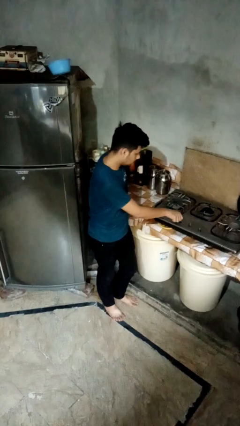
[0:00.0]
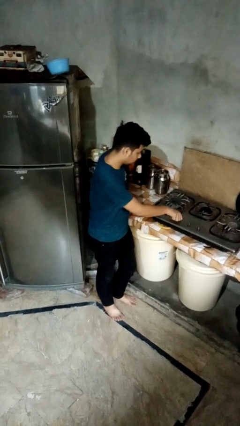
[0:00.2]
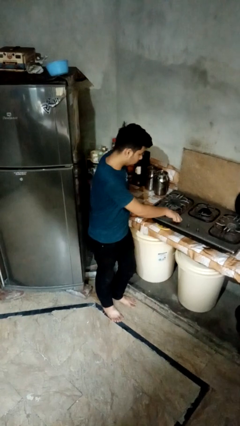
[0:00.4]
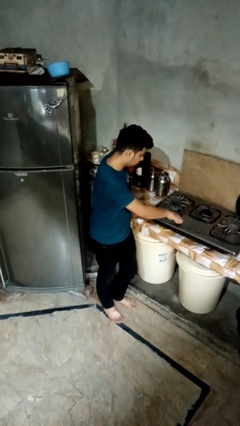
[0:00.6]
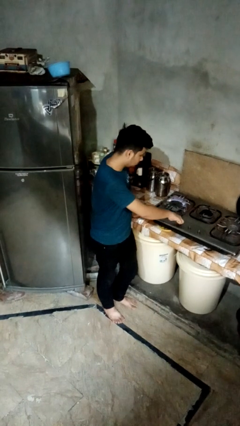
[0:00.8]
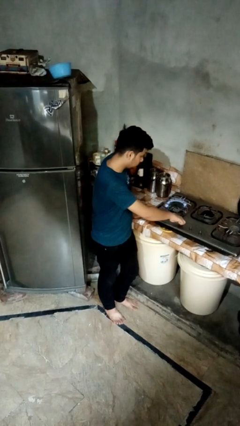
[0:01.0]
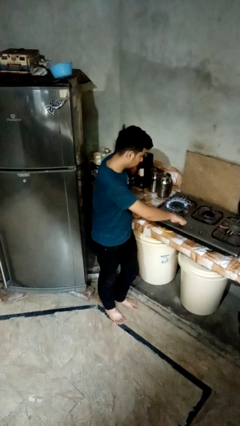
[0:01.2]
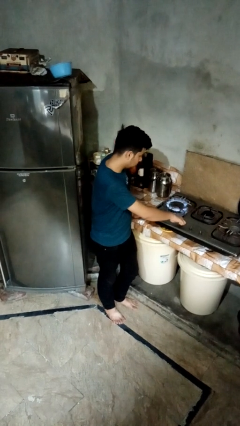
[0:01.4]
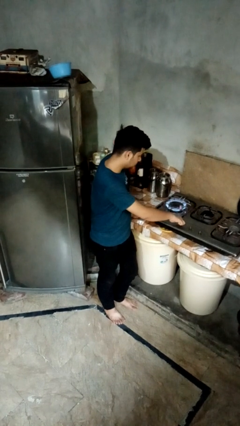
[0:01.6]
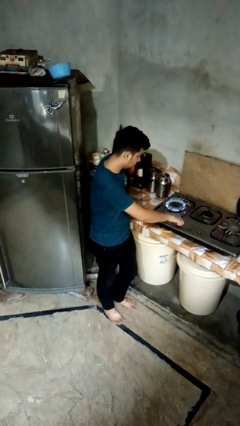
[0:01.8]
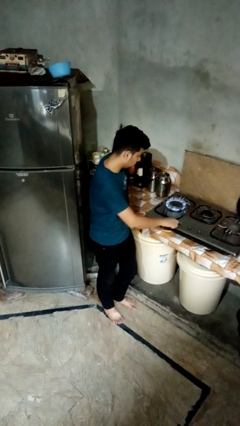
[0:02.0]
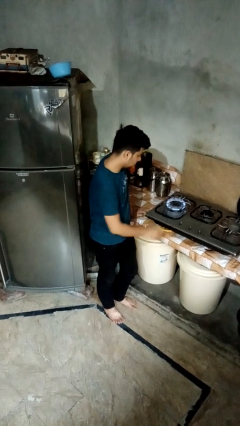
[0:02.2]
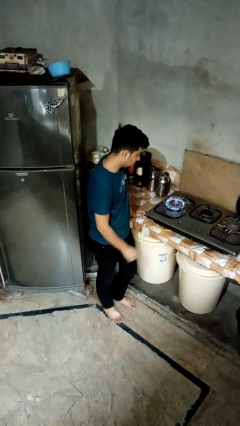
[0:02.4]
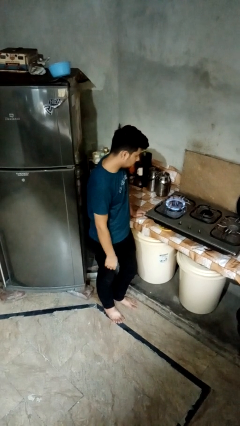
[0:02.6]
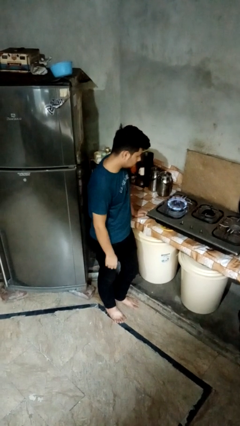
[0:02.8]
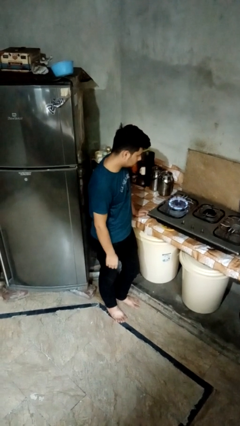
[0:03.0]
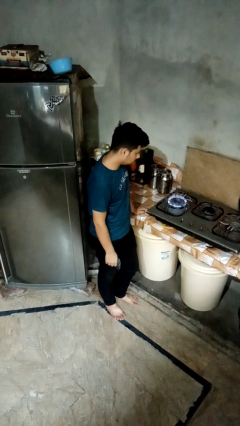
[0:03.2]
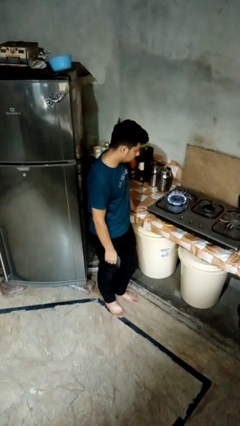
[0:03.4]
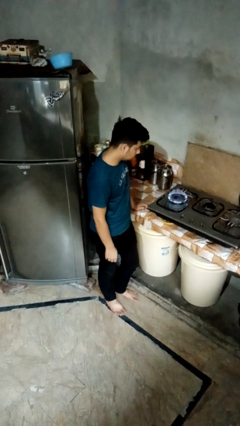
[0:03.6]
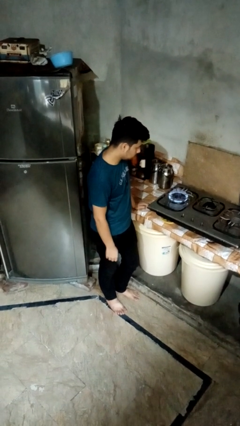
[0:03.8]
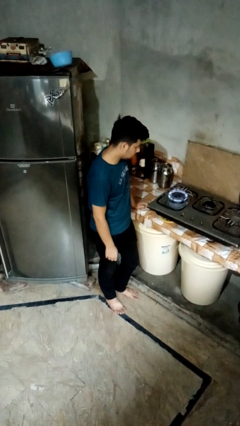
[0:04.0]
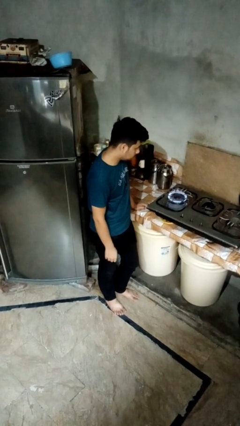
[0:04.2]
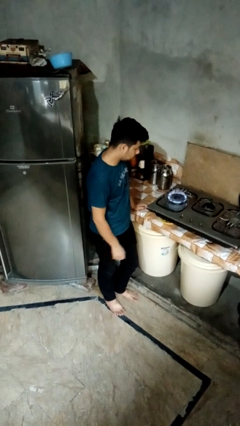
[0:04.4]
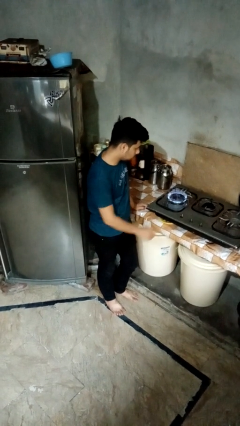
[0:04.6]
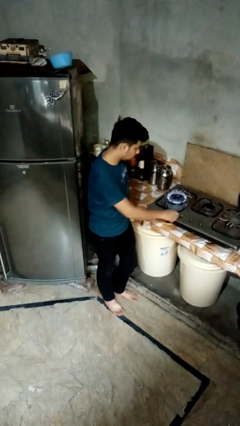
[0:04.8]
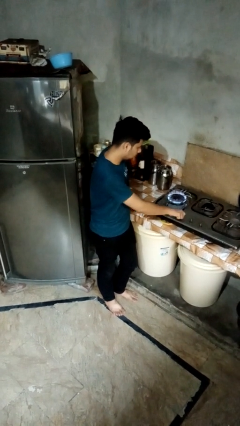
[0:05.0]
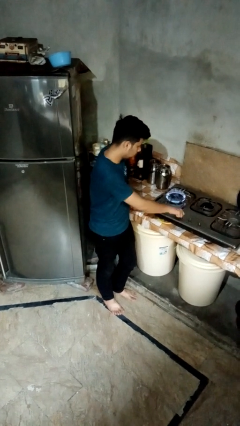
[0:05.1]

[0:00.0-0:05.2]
person turns on stovetop

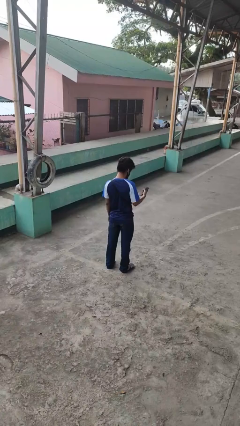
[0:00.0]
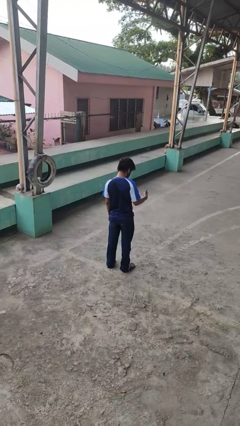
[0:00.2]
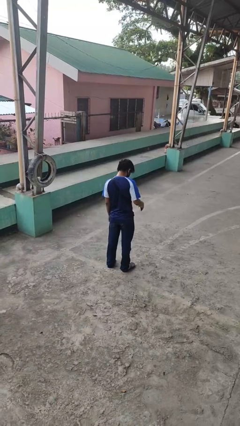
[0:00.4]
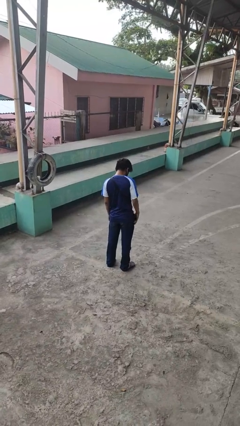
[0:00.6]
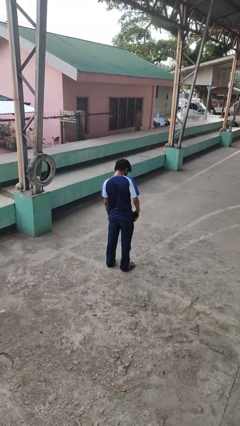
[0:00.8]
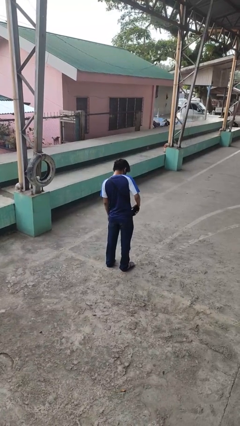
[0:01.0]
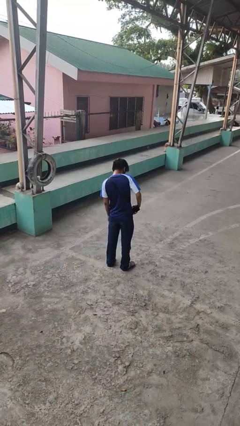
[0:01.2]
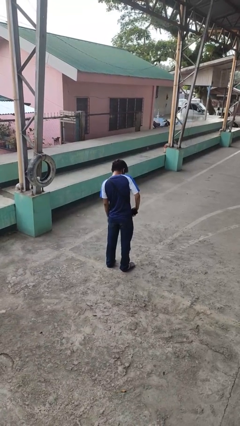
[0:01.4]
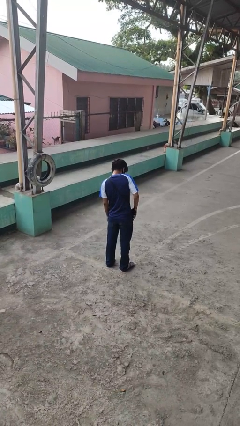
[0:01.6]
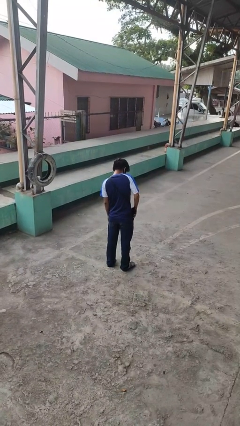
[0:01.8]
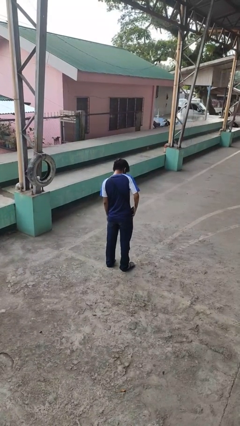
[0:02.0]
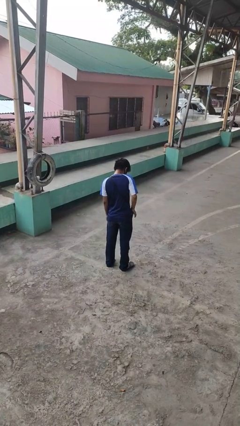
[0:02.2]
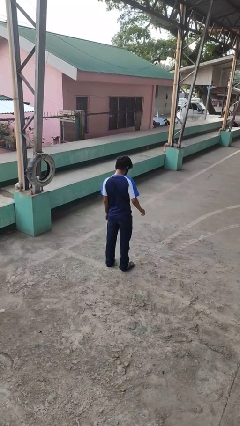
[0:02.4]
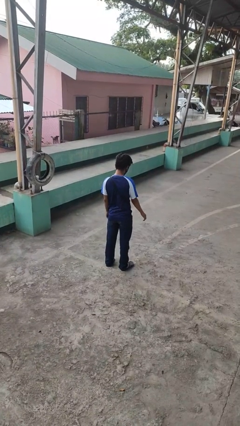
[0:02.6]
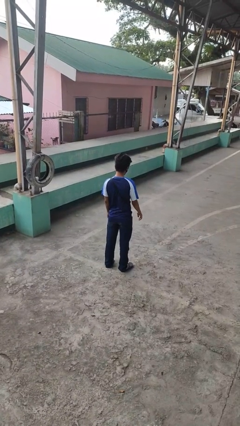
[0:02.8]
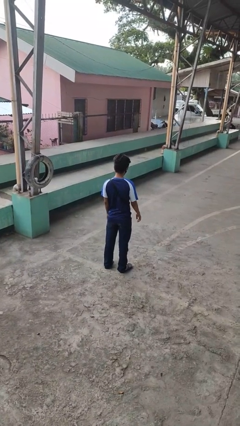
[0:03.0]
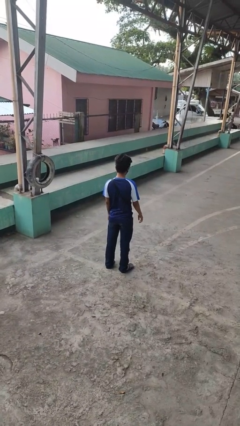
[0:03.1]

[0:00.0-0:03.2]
person puts phone into pocket

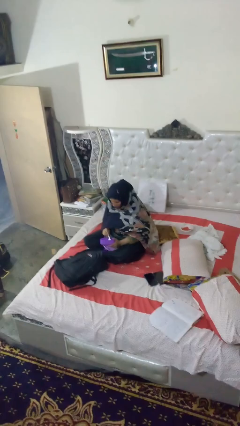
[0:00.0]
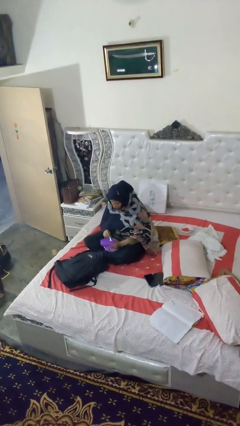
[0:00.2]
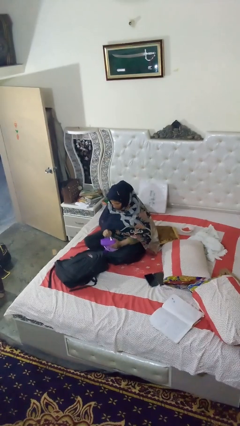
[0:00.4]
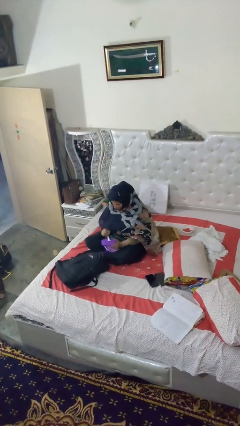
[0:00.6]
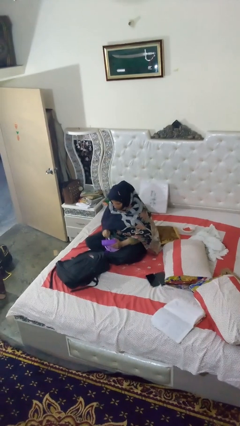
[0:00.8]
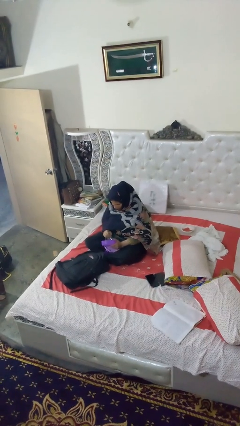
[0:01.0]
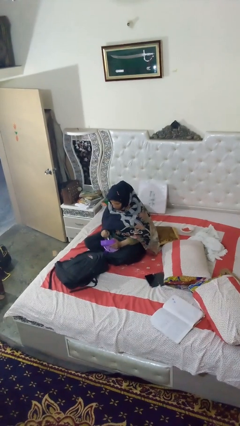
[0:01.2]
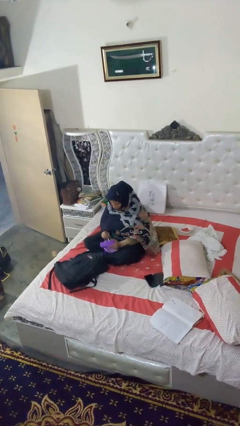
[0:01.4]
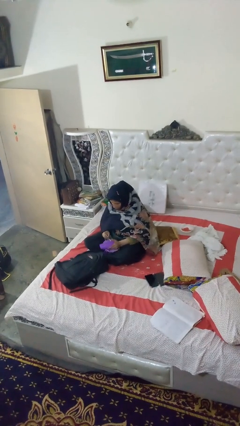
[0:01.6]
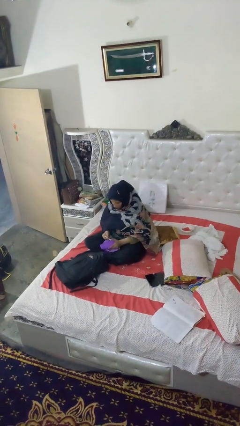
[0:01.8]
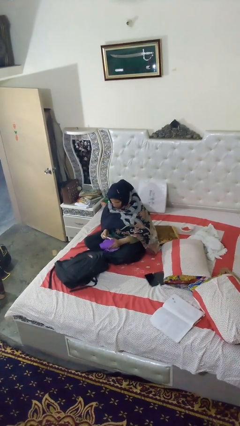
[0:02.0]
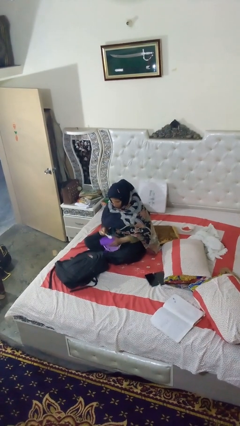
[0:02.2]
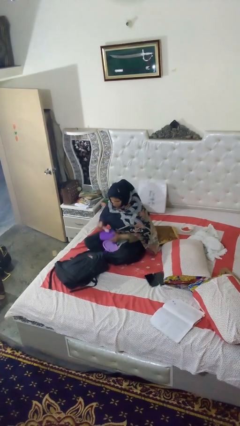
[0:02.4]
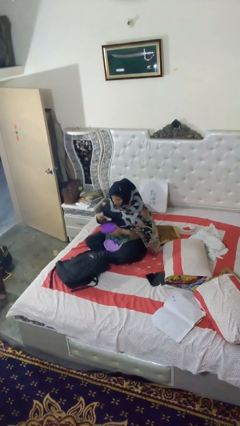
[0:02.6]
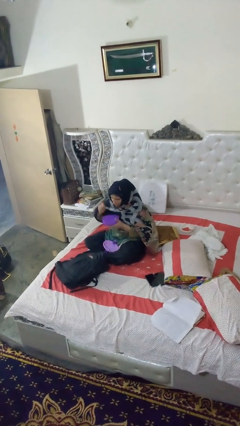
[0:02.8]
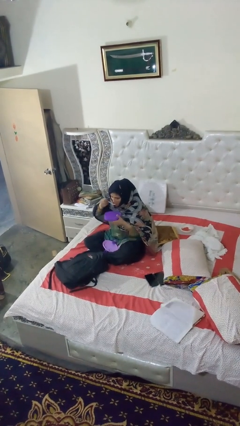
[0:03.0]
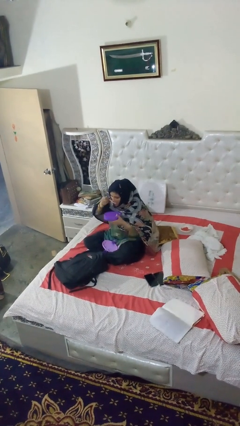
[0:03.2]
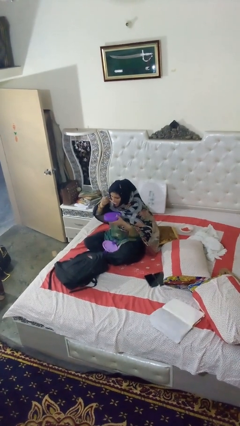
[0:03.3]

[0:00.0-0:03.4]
person eats snack from bag

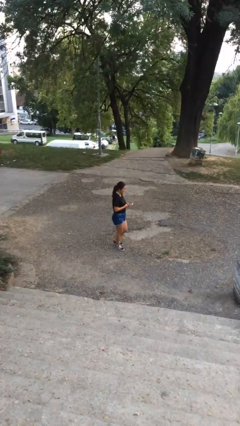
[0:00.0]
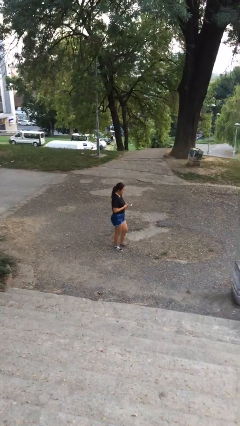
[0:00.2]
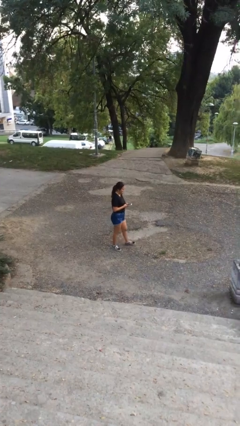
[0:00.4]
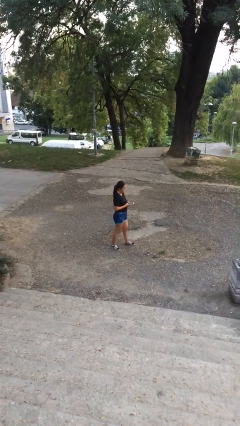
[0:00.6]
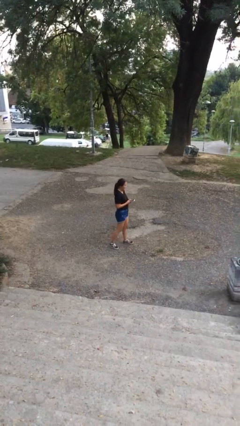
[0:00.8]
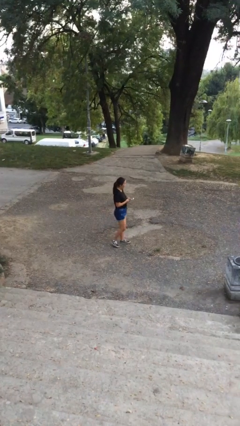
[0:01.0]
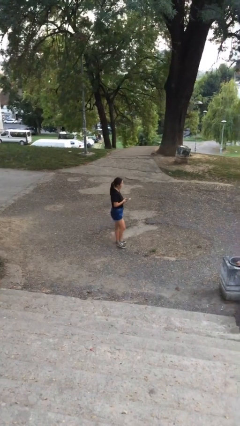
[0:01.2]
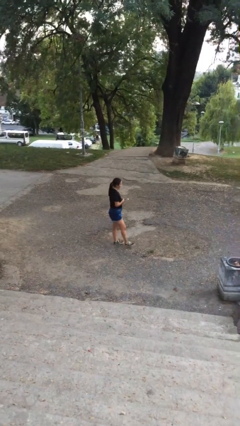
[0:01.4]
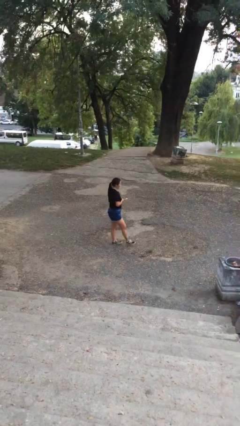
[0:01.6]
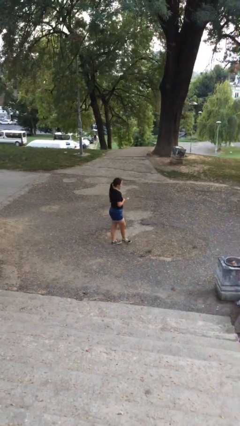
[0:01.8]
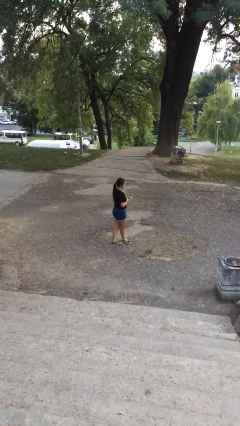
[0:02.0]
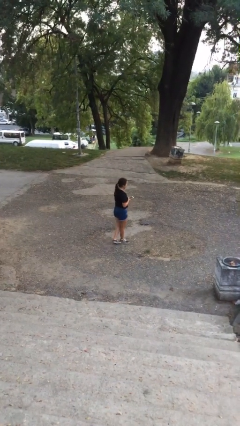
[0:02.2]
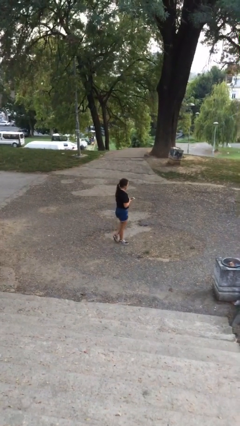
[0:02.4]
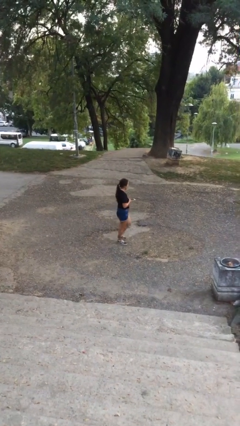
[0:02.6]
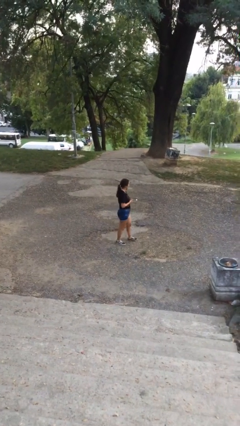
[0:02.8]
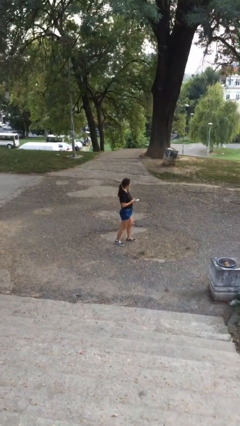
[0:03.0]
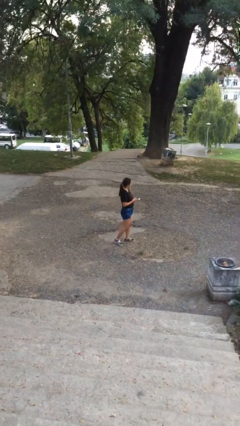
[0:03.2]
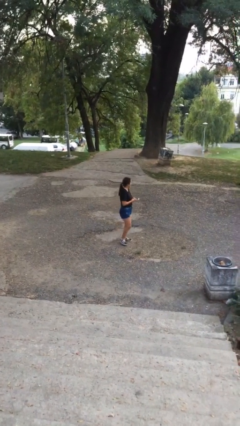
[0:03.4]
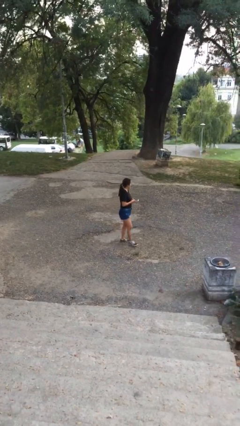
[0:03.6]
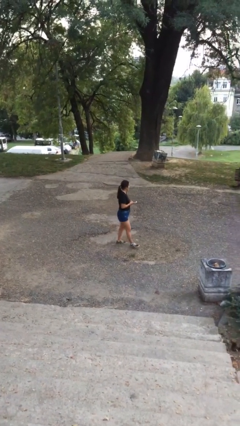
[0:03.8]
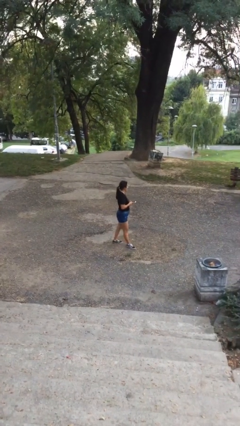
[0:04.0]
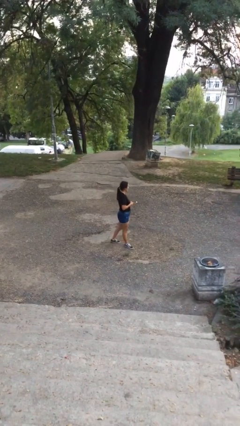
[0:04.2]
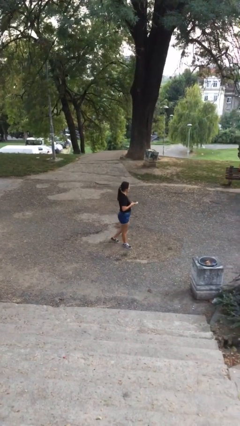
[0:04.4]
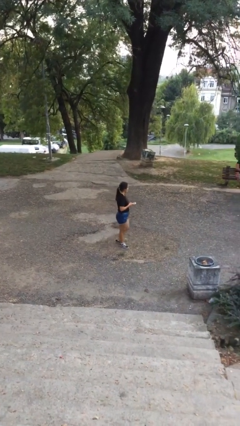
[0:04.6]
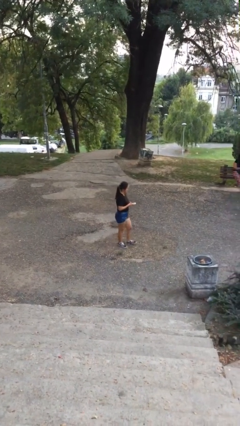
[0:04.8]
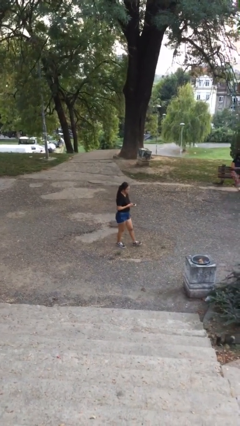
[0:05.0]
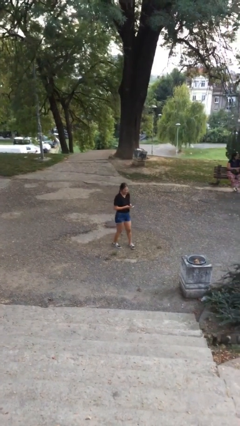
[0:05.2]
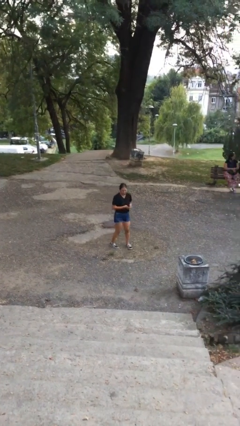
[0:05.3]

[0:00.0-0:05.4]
person texts on phone

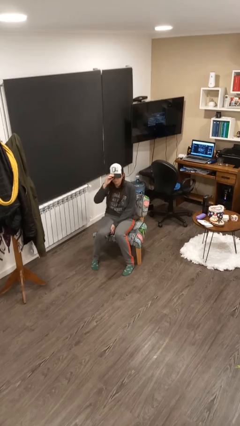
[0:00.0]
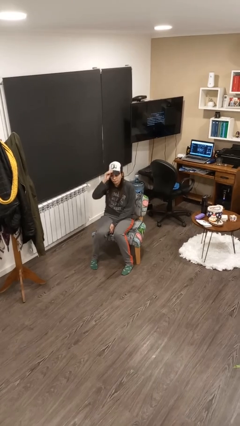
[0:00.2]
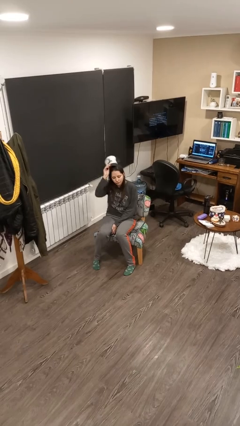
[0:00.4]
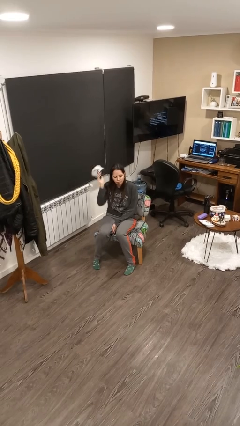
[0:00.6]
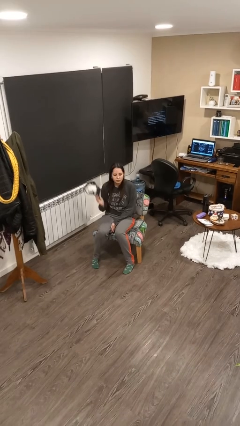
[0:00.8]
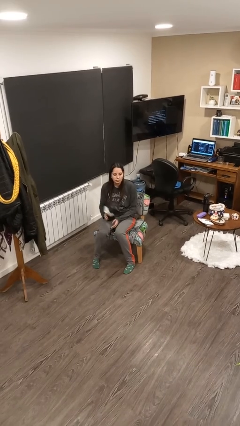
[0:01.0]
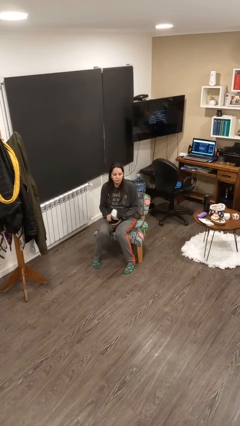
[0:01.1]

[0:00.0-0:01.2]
person takes off hat
